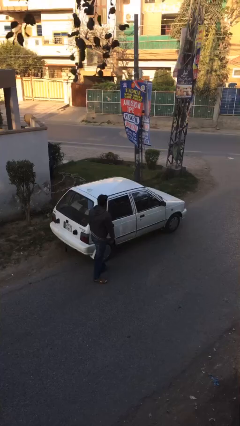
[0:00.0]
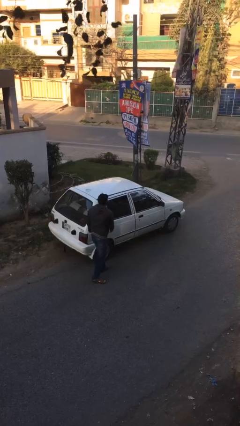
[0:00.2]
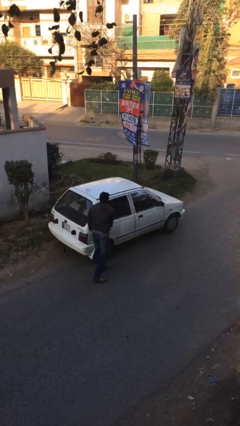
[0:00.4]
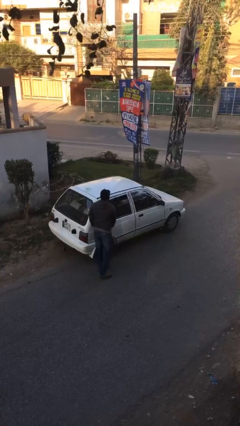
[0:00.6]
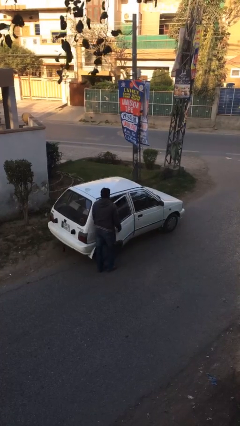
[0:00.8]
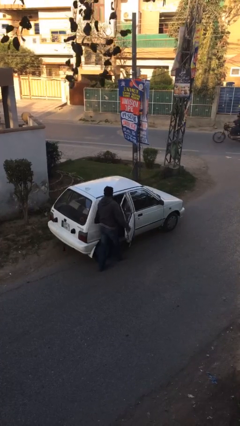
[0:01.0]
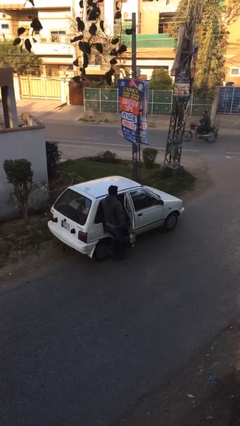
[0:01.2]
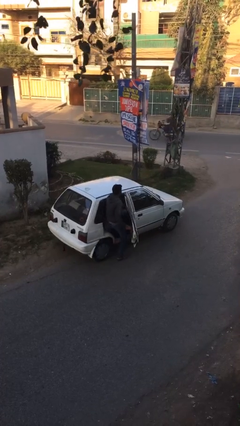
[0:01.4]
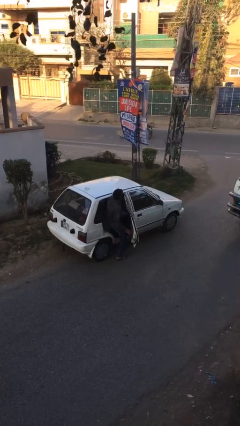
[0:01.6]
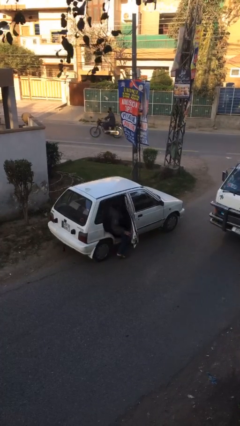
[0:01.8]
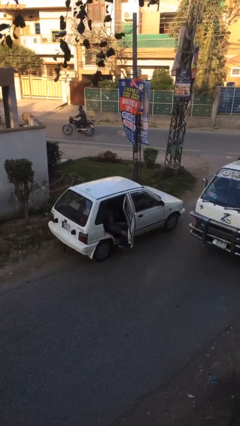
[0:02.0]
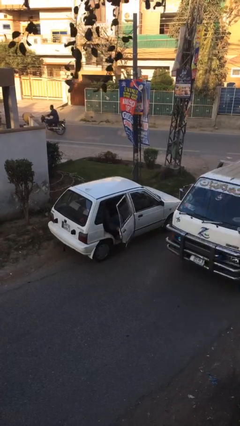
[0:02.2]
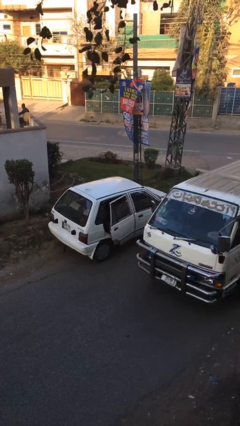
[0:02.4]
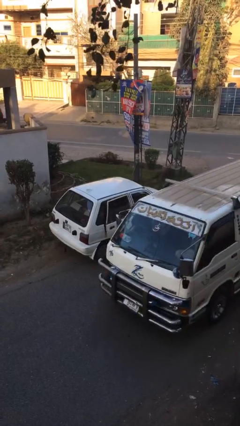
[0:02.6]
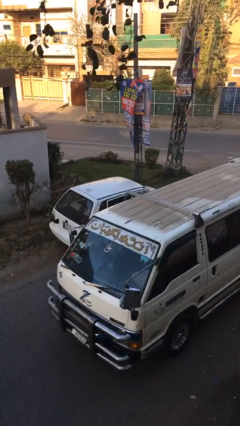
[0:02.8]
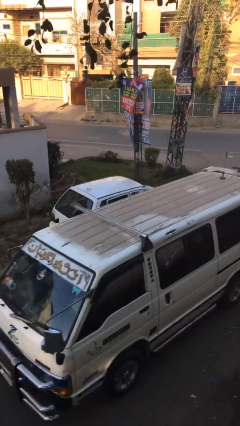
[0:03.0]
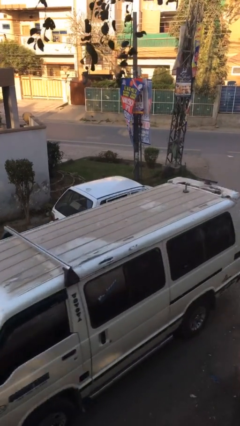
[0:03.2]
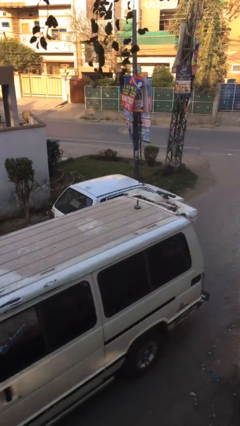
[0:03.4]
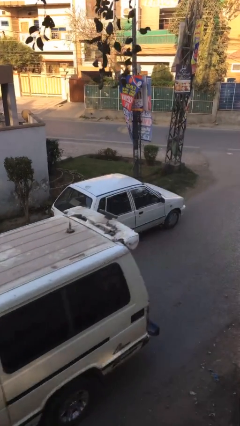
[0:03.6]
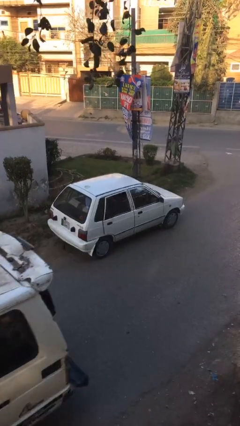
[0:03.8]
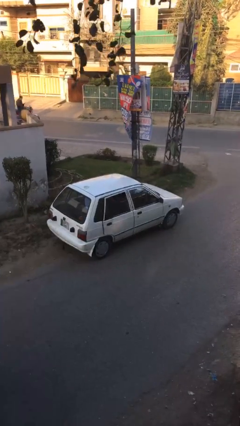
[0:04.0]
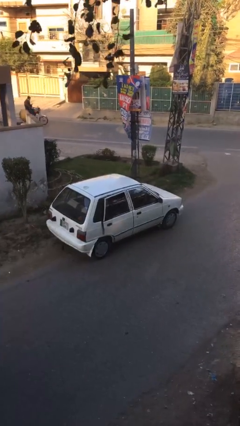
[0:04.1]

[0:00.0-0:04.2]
car picks up person

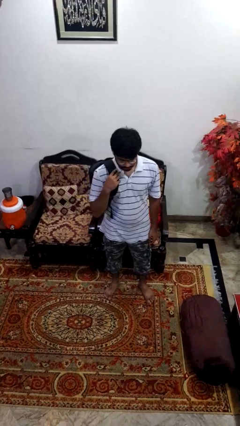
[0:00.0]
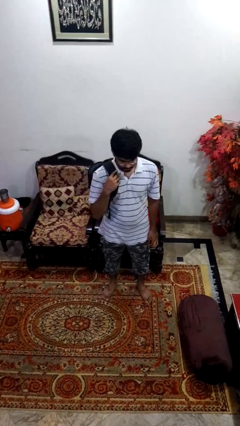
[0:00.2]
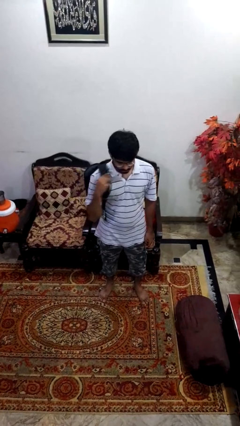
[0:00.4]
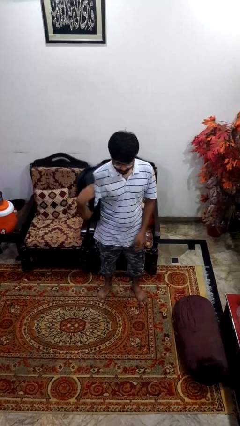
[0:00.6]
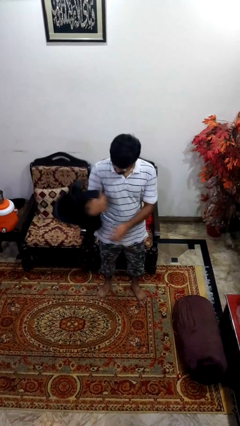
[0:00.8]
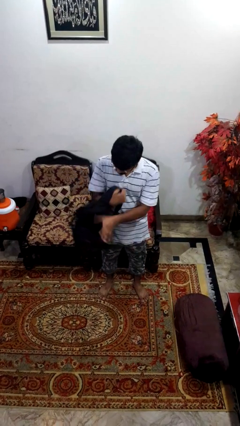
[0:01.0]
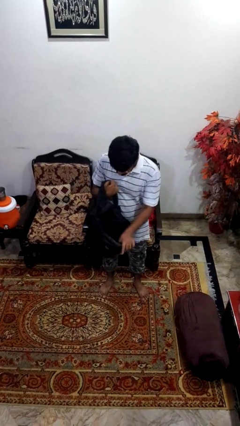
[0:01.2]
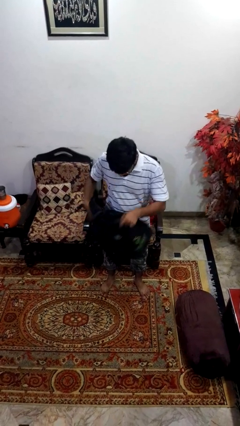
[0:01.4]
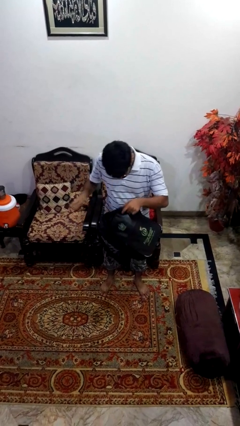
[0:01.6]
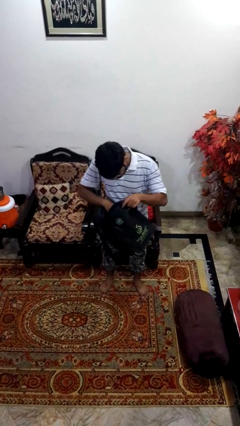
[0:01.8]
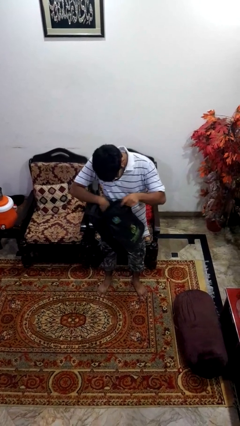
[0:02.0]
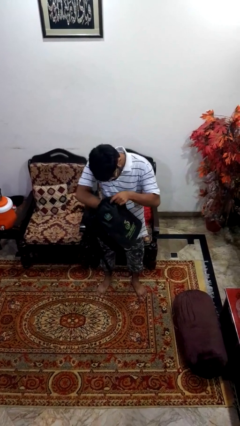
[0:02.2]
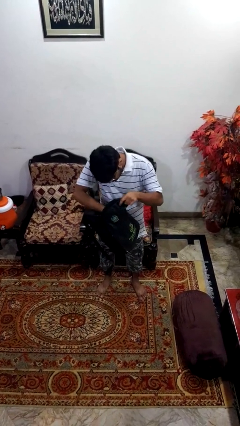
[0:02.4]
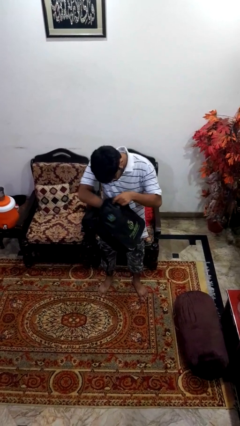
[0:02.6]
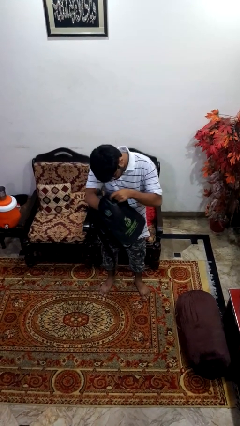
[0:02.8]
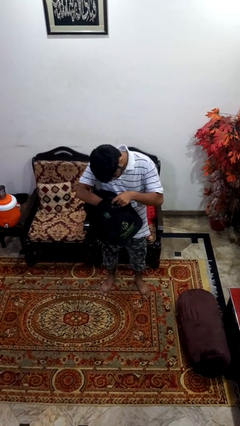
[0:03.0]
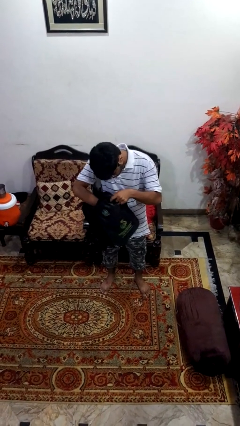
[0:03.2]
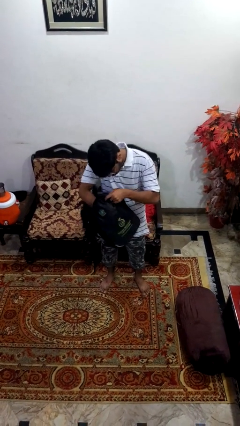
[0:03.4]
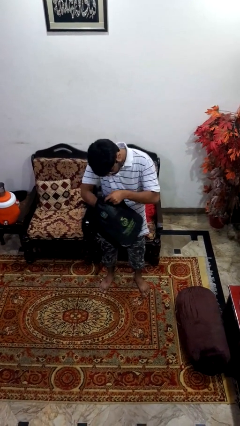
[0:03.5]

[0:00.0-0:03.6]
person searches in backpack

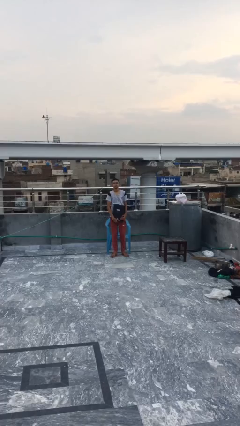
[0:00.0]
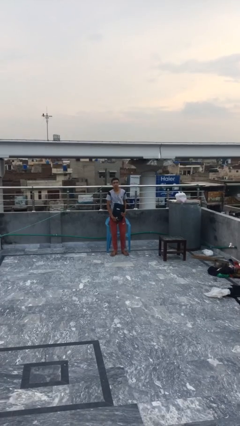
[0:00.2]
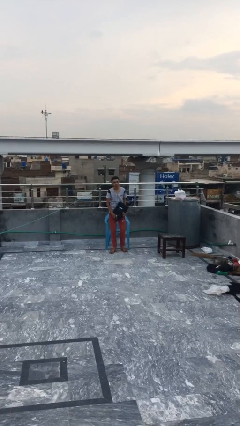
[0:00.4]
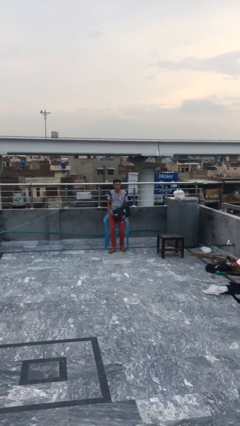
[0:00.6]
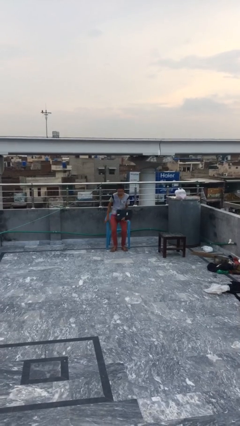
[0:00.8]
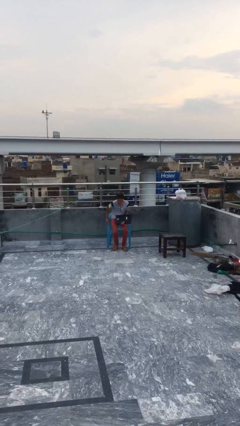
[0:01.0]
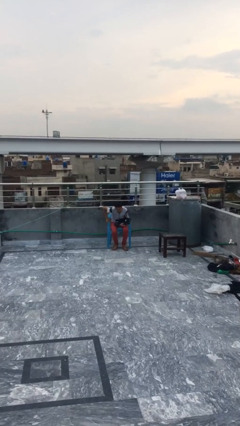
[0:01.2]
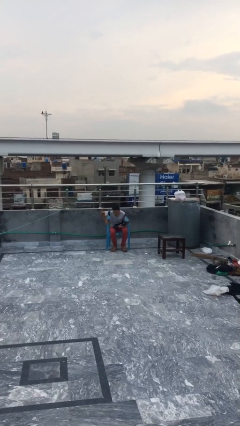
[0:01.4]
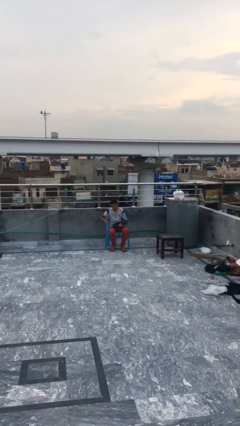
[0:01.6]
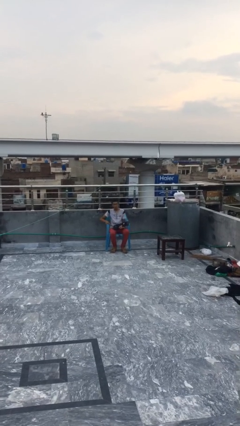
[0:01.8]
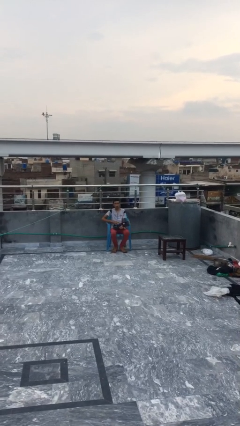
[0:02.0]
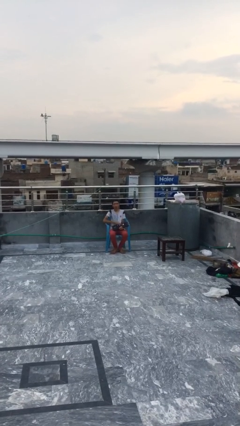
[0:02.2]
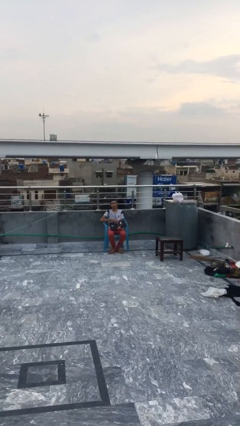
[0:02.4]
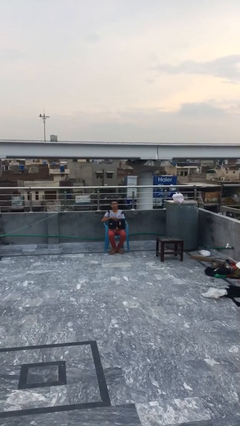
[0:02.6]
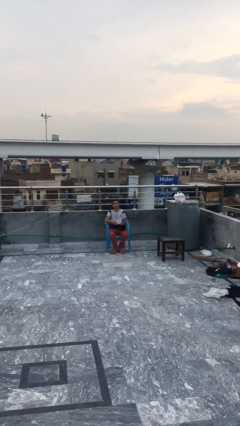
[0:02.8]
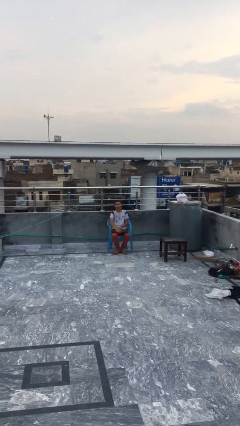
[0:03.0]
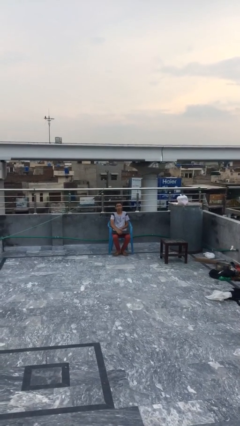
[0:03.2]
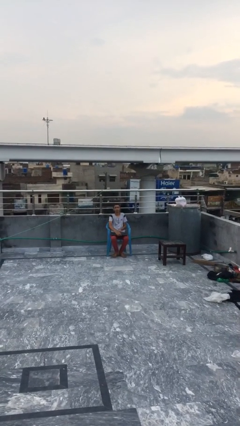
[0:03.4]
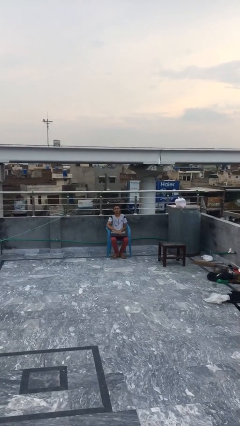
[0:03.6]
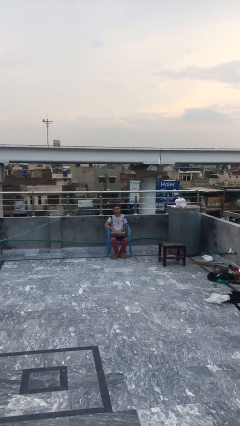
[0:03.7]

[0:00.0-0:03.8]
person sits down

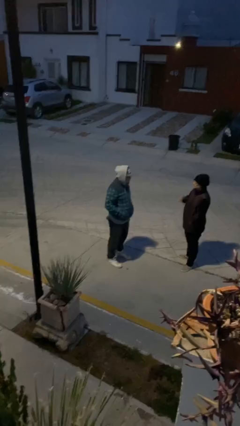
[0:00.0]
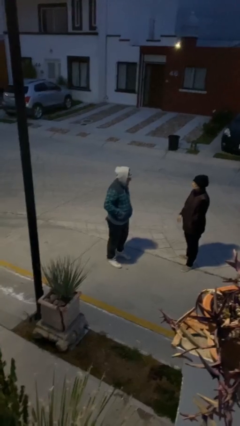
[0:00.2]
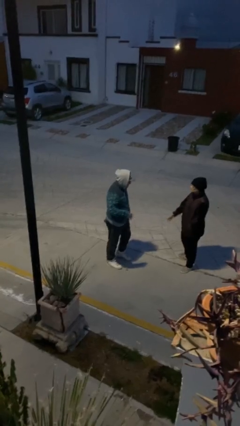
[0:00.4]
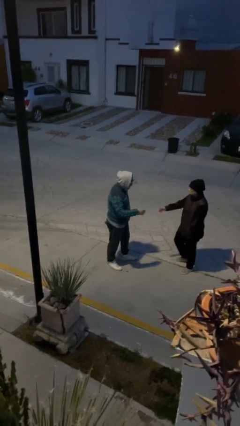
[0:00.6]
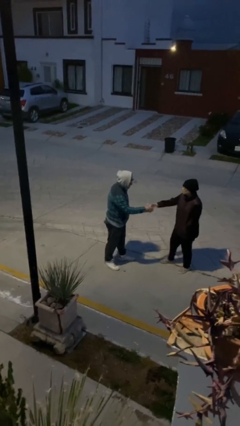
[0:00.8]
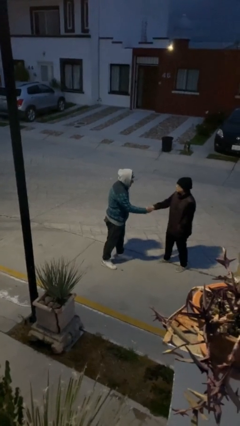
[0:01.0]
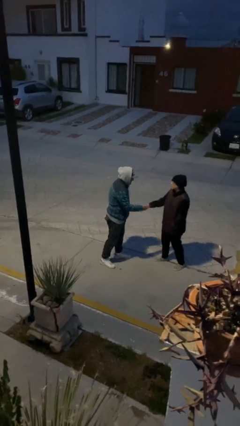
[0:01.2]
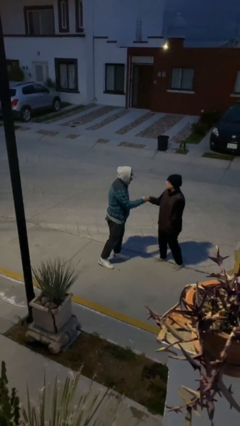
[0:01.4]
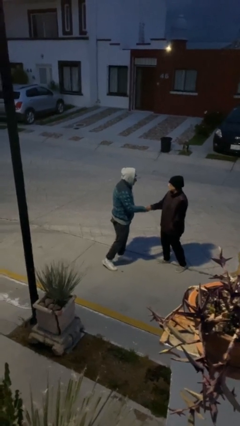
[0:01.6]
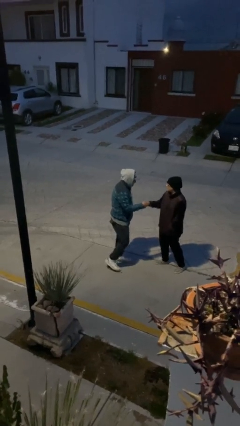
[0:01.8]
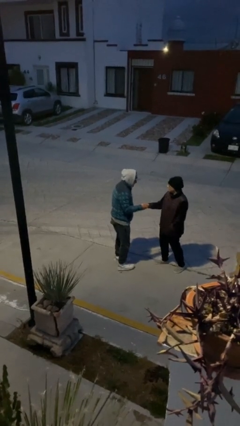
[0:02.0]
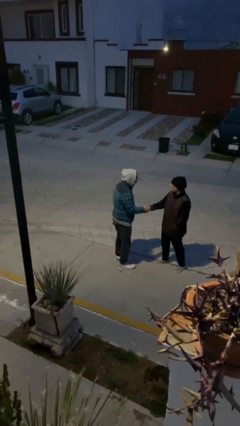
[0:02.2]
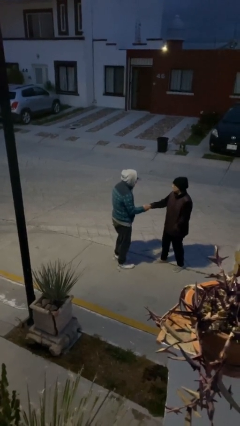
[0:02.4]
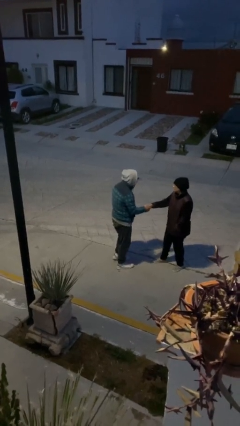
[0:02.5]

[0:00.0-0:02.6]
person shakes hand

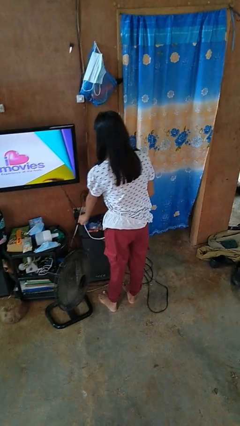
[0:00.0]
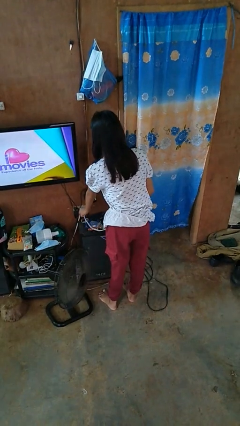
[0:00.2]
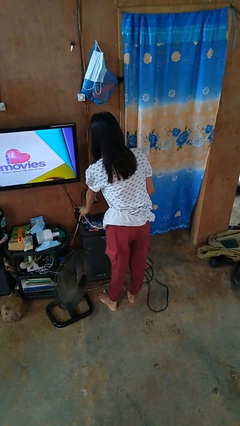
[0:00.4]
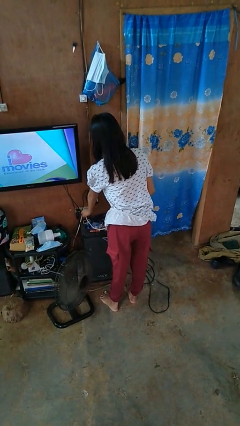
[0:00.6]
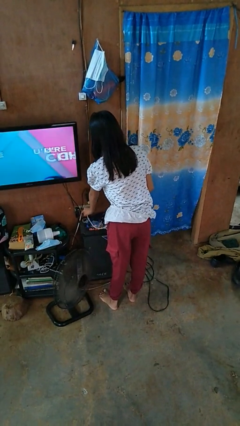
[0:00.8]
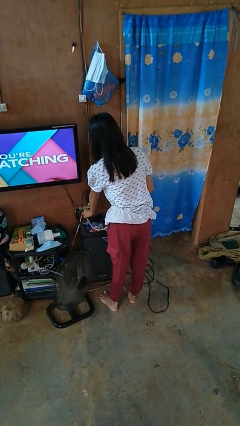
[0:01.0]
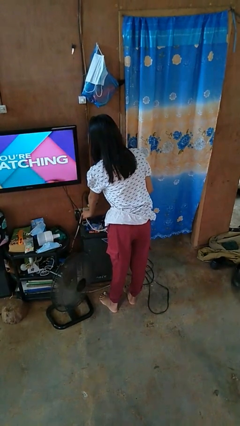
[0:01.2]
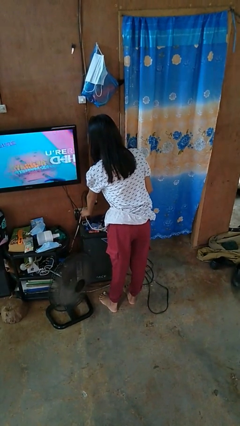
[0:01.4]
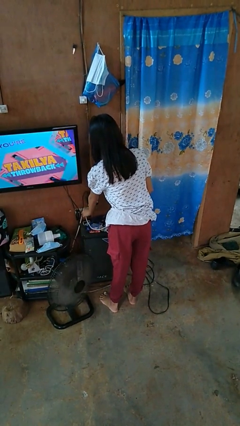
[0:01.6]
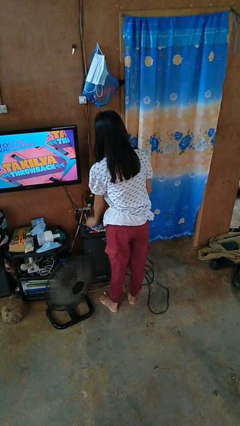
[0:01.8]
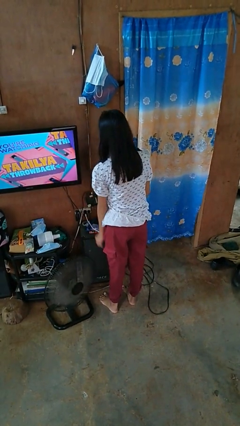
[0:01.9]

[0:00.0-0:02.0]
person plugs into electrical socket

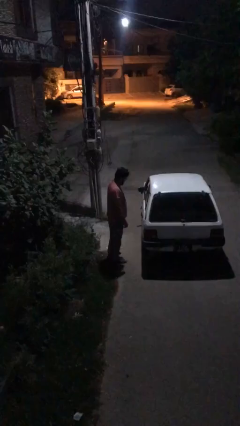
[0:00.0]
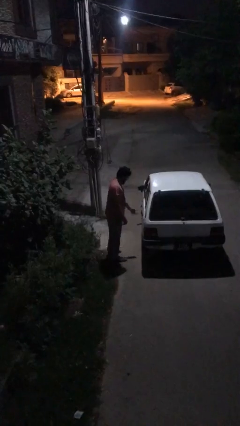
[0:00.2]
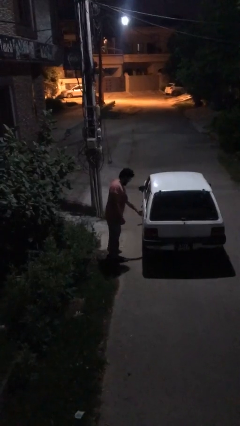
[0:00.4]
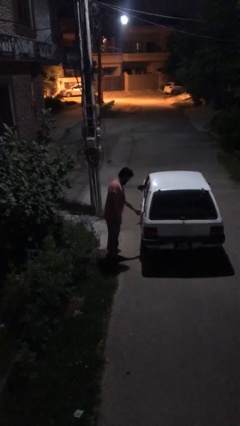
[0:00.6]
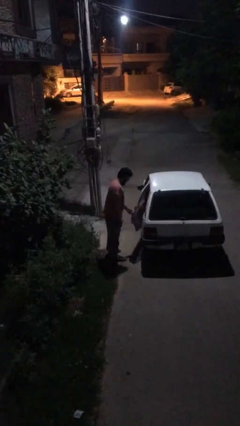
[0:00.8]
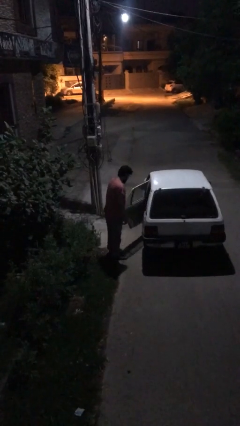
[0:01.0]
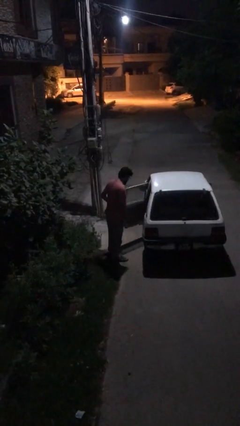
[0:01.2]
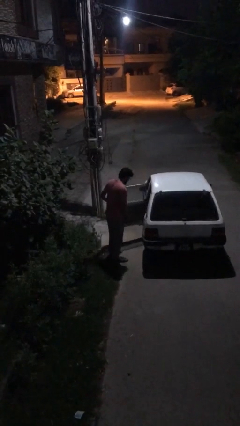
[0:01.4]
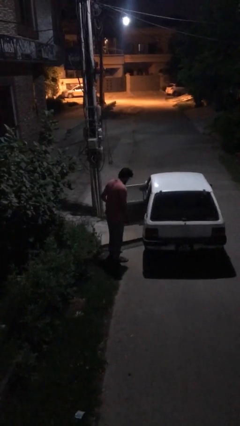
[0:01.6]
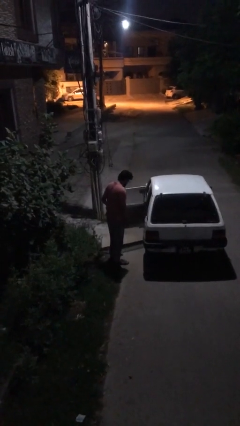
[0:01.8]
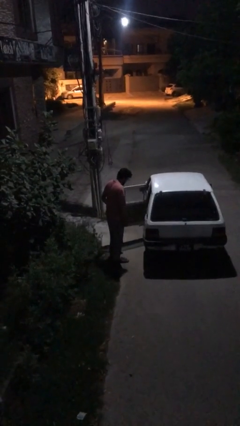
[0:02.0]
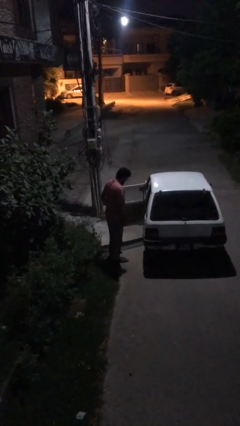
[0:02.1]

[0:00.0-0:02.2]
person opens car door
